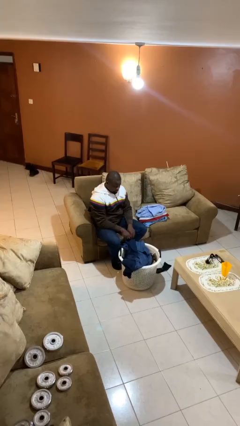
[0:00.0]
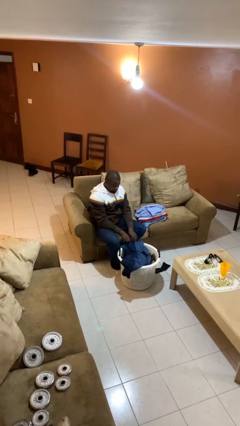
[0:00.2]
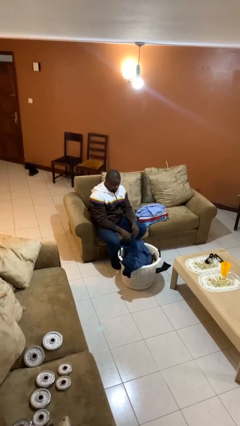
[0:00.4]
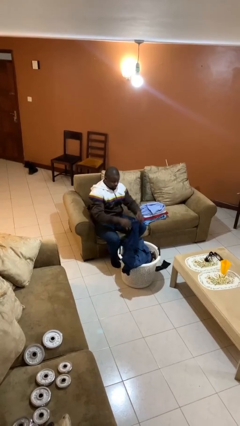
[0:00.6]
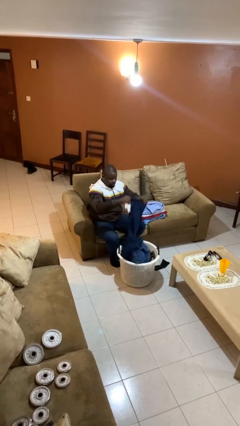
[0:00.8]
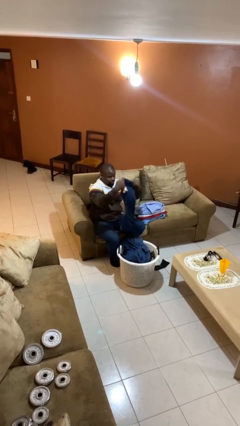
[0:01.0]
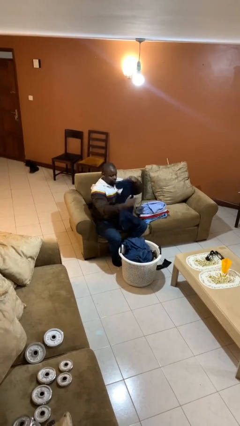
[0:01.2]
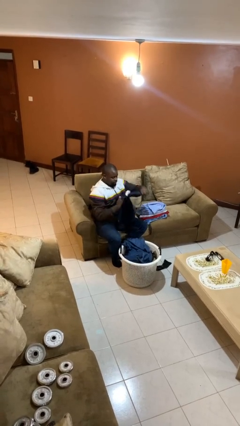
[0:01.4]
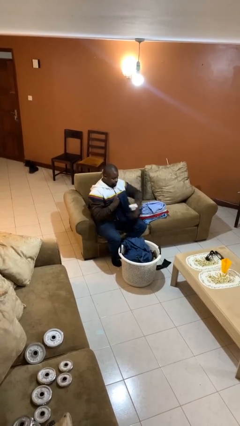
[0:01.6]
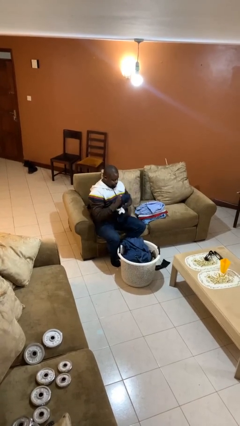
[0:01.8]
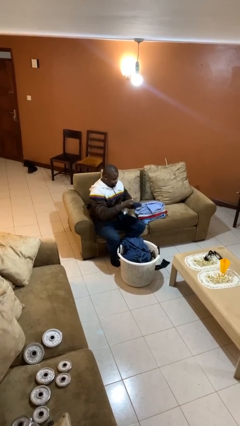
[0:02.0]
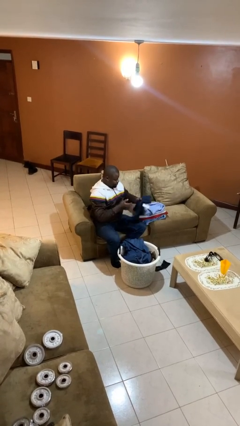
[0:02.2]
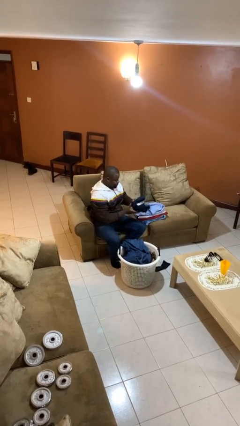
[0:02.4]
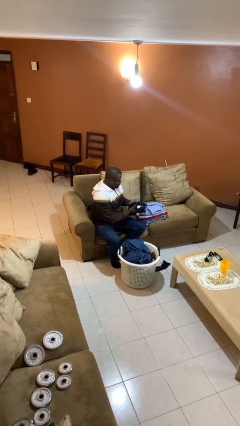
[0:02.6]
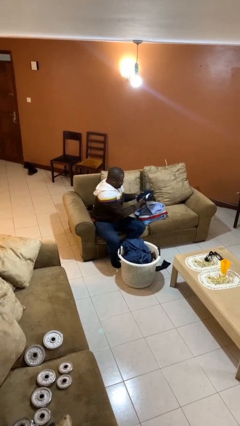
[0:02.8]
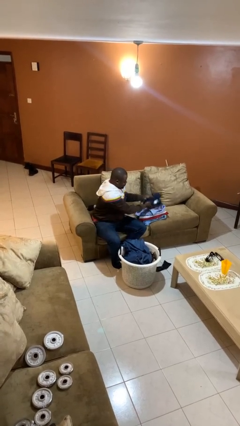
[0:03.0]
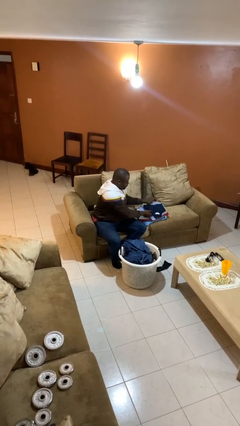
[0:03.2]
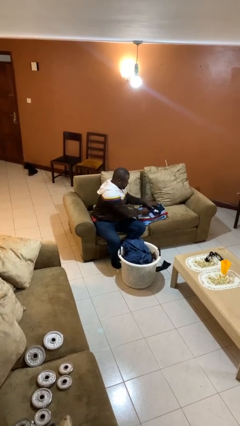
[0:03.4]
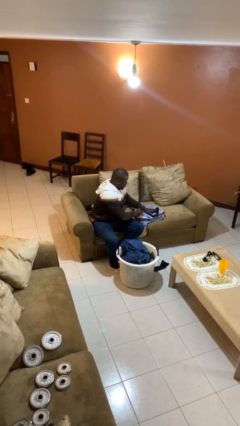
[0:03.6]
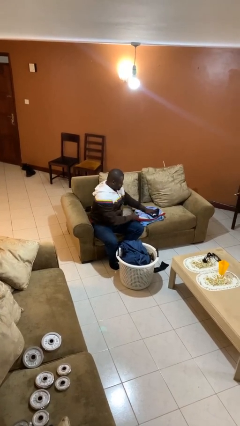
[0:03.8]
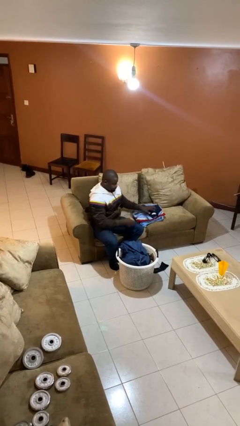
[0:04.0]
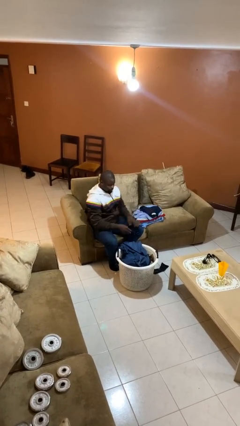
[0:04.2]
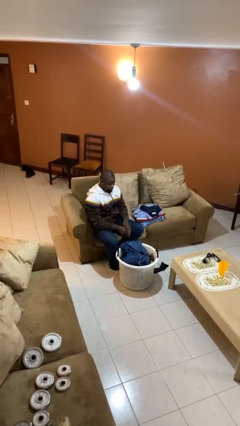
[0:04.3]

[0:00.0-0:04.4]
person folds shirt

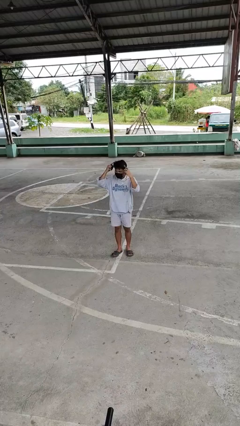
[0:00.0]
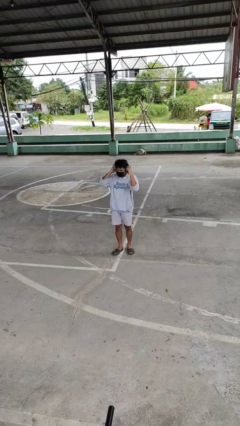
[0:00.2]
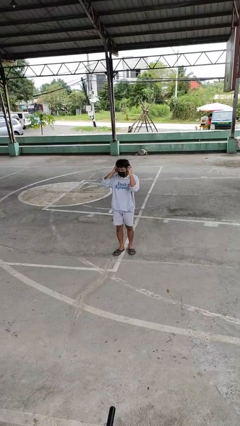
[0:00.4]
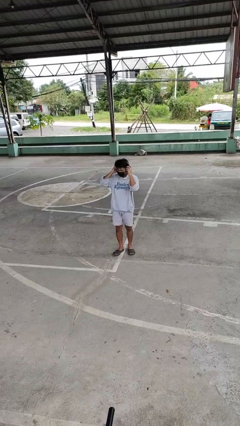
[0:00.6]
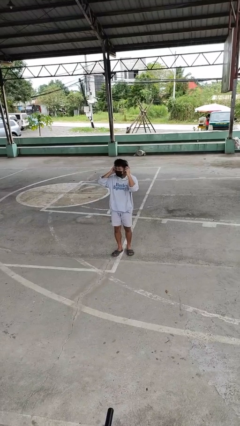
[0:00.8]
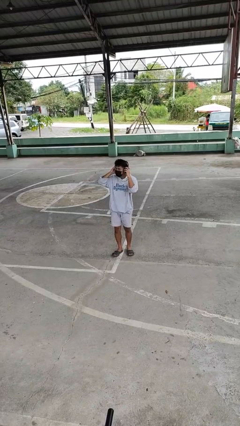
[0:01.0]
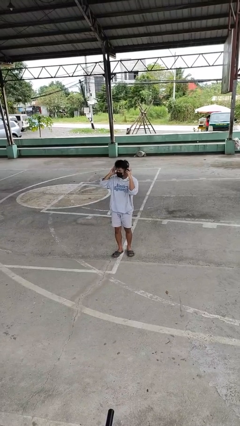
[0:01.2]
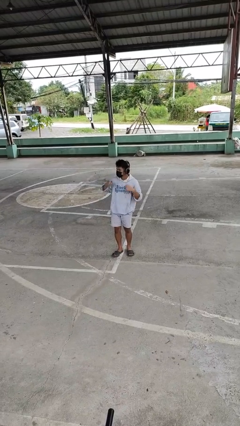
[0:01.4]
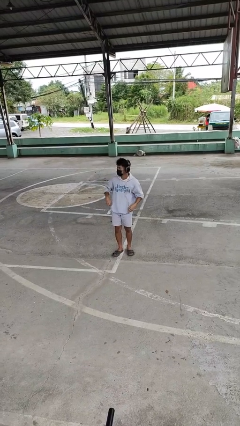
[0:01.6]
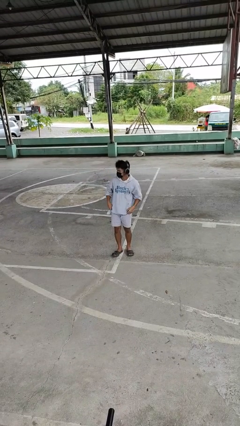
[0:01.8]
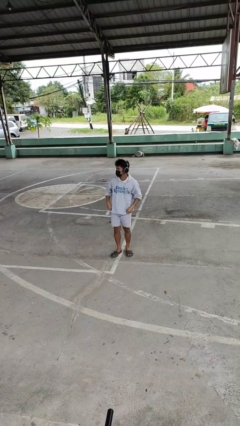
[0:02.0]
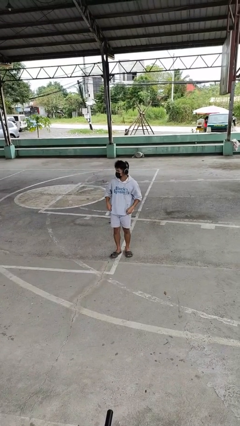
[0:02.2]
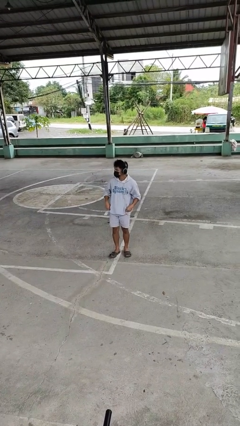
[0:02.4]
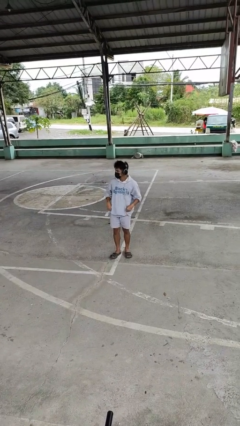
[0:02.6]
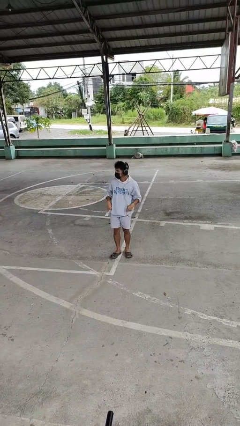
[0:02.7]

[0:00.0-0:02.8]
person puts on headphones

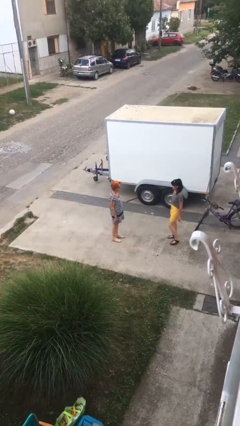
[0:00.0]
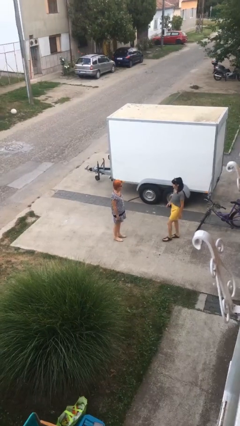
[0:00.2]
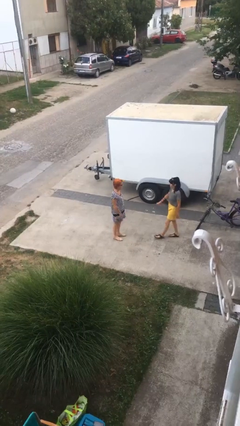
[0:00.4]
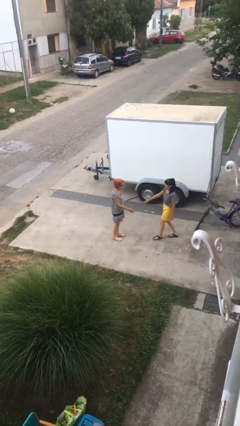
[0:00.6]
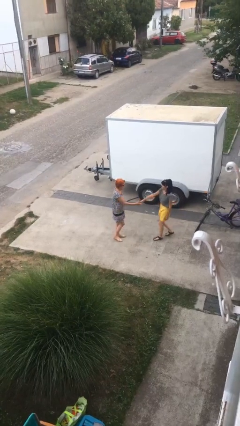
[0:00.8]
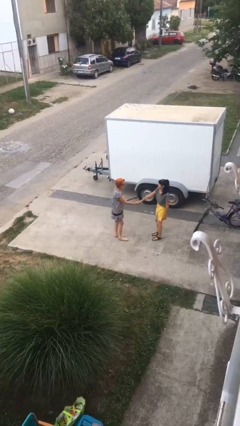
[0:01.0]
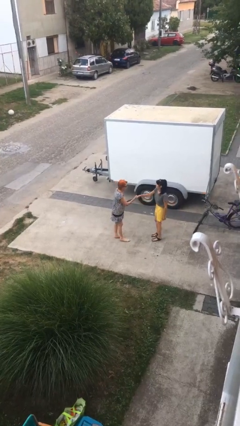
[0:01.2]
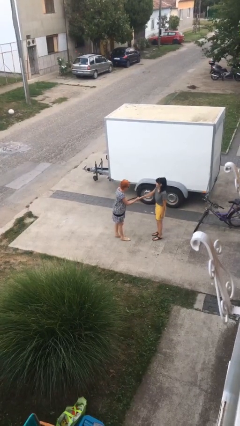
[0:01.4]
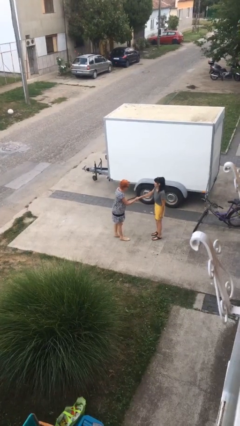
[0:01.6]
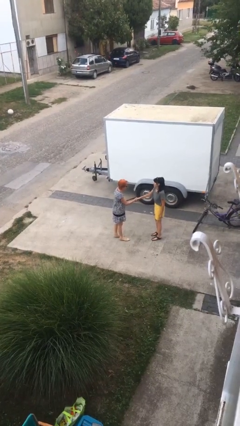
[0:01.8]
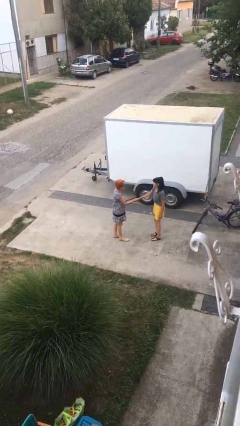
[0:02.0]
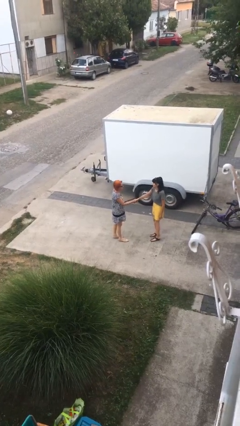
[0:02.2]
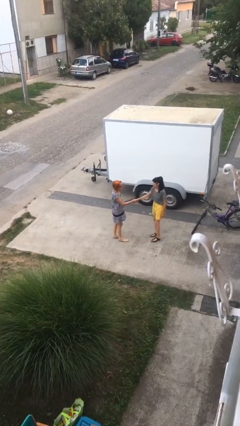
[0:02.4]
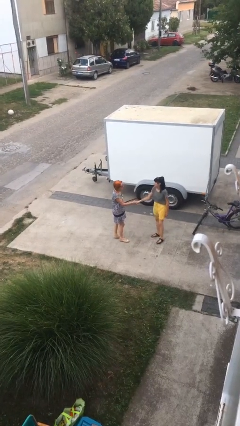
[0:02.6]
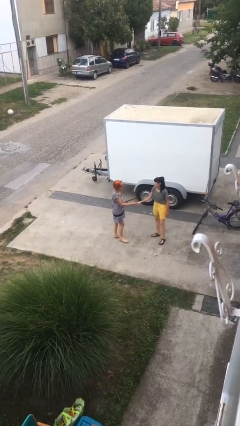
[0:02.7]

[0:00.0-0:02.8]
person shakes hand

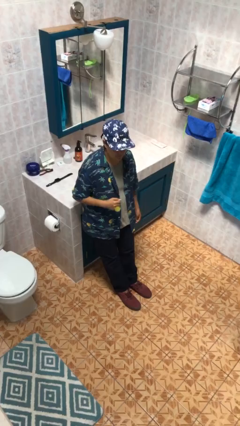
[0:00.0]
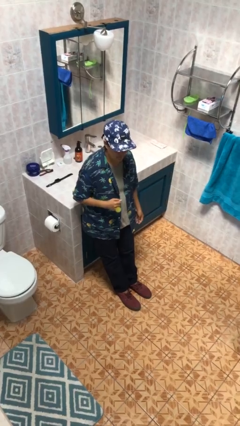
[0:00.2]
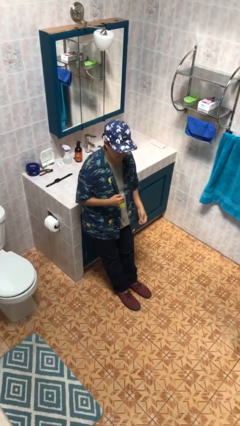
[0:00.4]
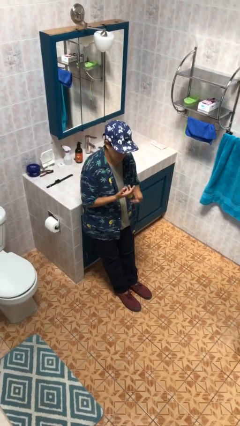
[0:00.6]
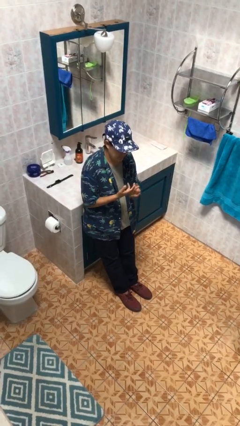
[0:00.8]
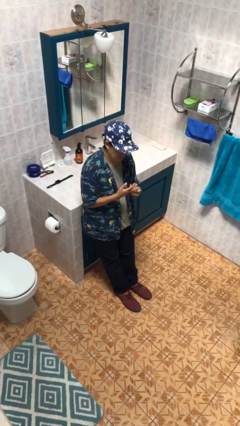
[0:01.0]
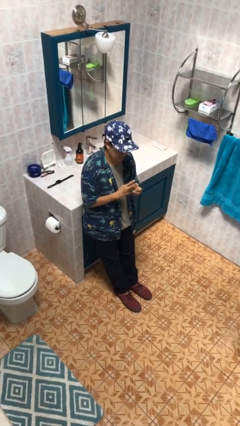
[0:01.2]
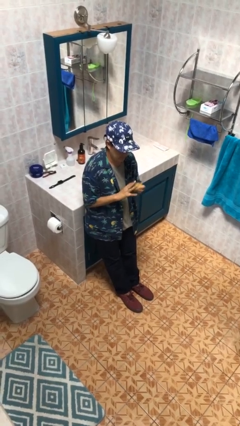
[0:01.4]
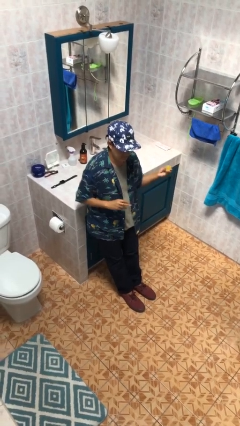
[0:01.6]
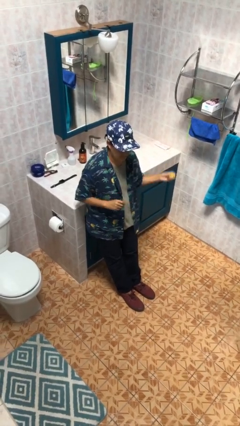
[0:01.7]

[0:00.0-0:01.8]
person takes off ring

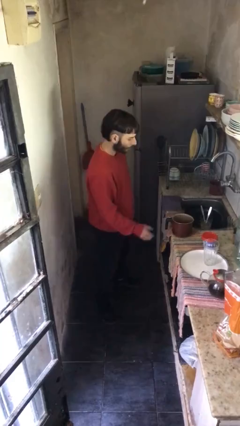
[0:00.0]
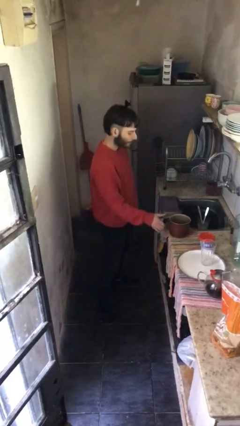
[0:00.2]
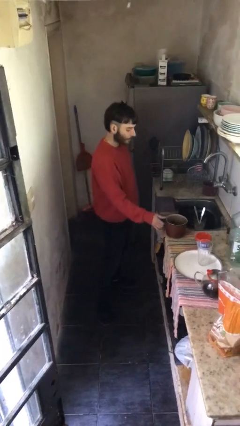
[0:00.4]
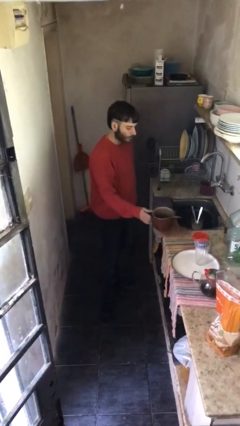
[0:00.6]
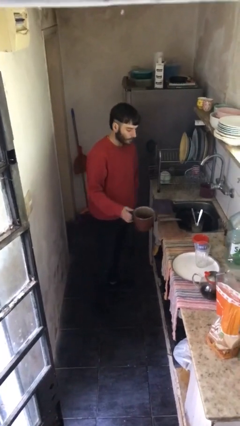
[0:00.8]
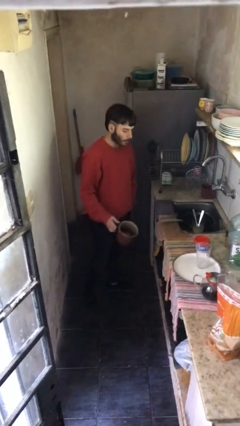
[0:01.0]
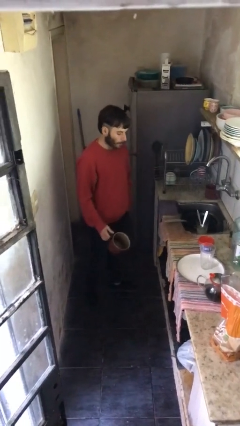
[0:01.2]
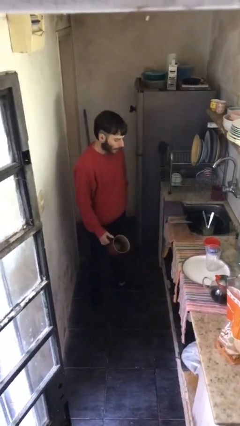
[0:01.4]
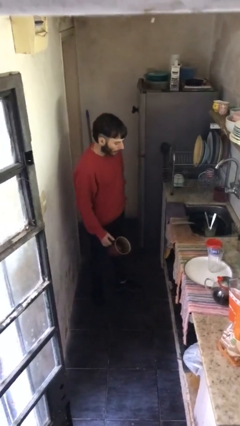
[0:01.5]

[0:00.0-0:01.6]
person picks up object from countertop

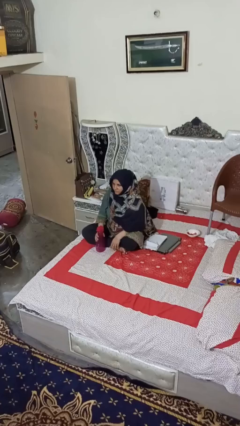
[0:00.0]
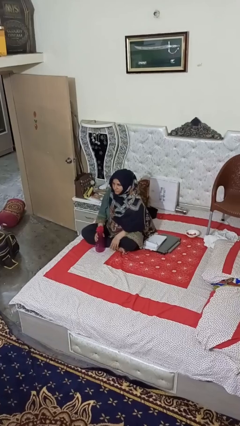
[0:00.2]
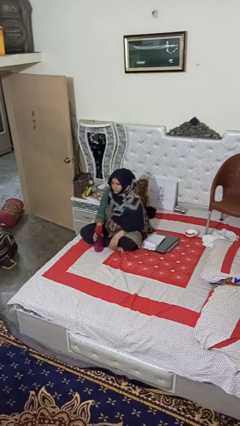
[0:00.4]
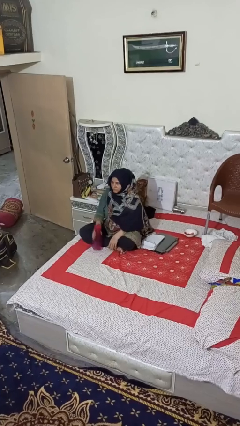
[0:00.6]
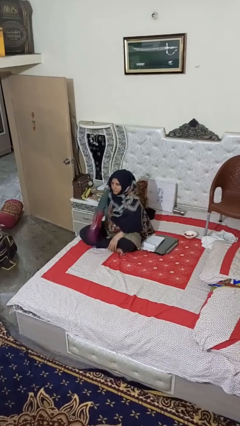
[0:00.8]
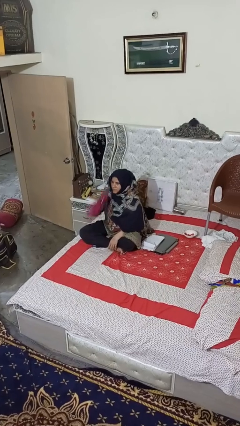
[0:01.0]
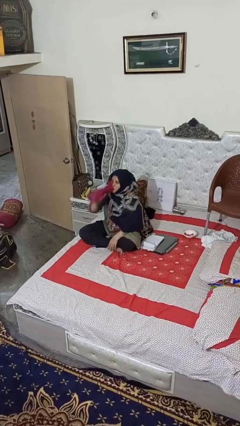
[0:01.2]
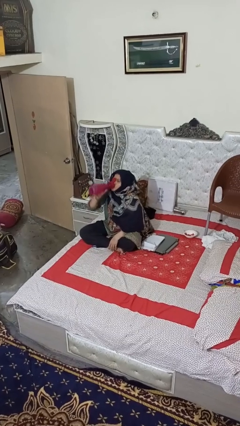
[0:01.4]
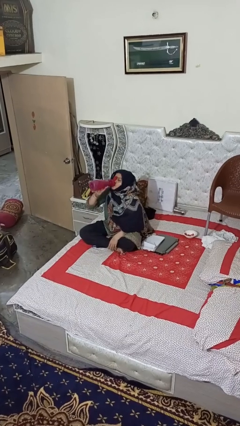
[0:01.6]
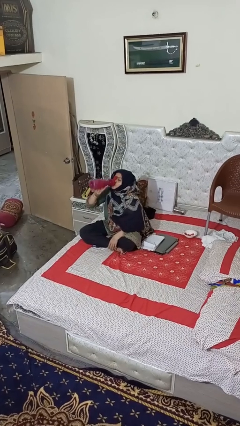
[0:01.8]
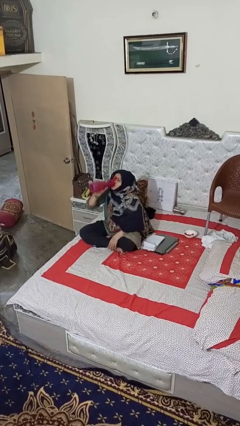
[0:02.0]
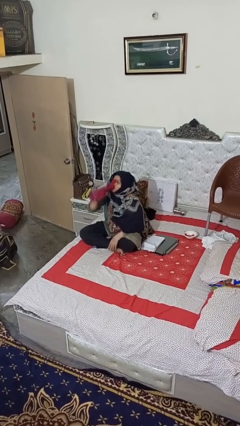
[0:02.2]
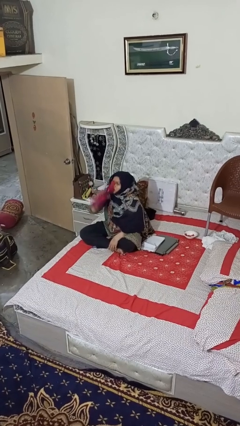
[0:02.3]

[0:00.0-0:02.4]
person drinks from bottle

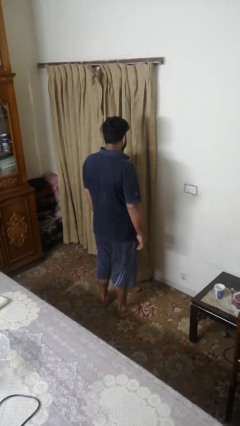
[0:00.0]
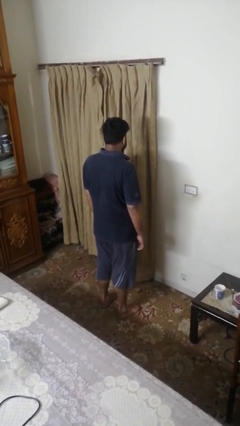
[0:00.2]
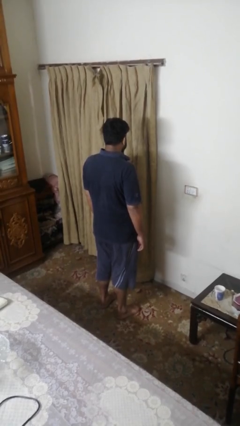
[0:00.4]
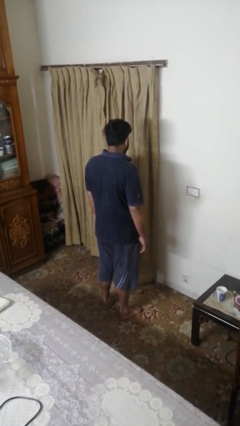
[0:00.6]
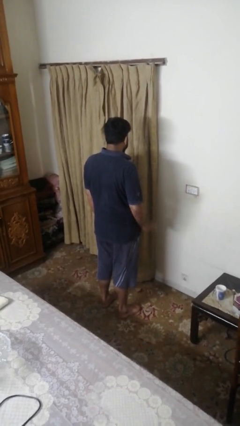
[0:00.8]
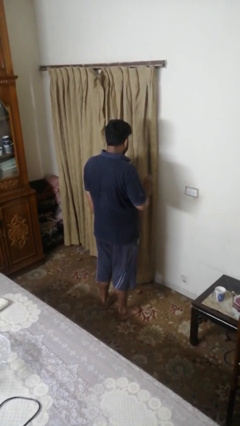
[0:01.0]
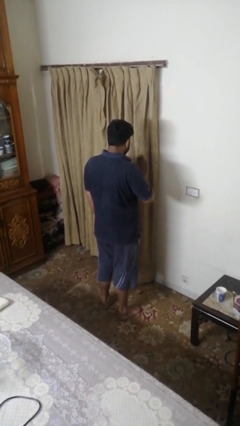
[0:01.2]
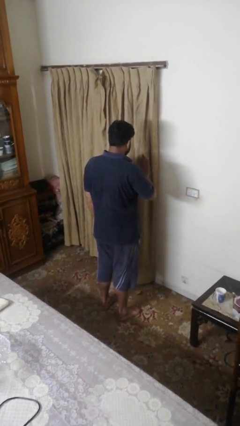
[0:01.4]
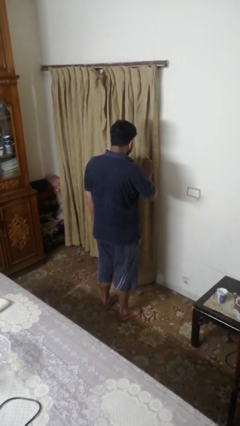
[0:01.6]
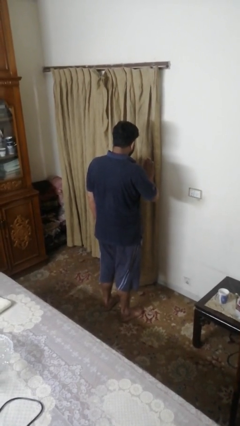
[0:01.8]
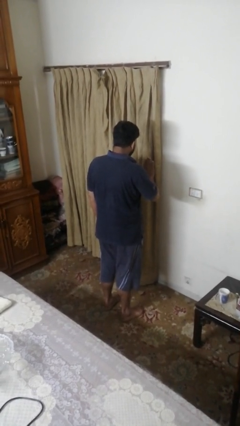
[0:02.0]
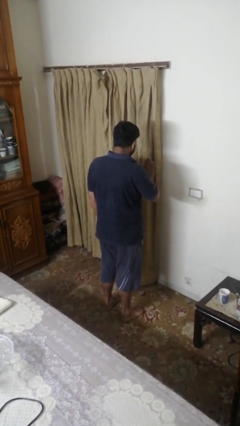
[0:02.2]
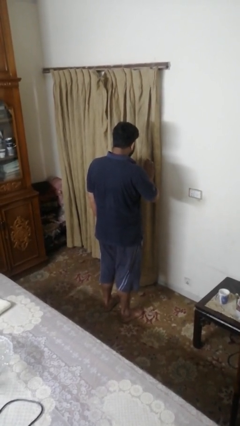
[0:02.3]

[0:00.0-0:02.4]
person gestures stop
